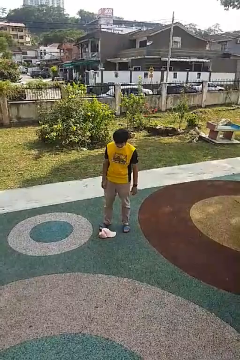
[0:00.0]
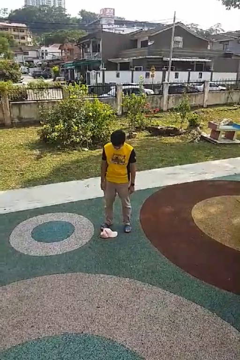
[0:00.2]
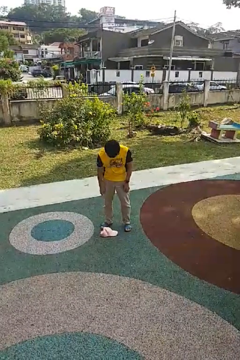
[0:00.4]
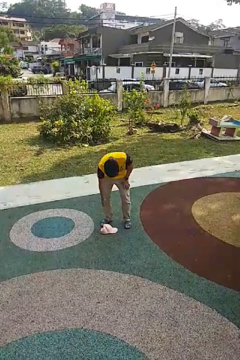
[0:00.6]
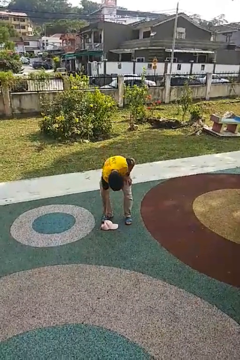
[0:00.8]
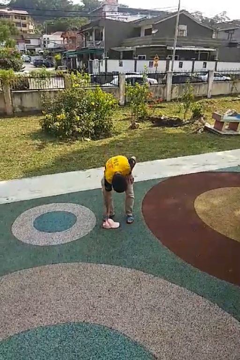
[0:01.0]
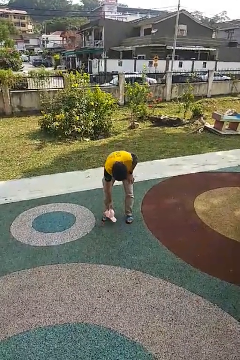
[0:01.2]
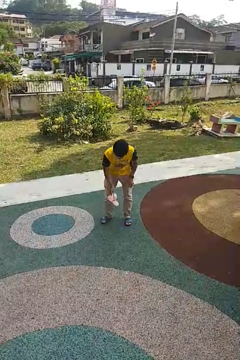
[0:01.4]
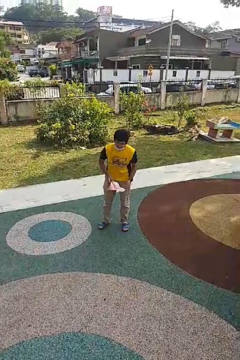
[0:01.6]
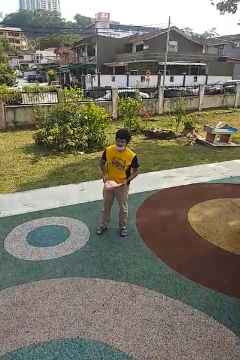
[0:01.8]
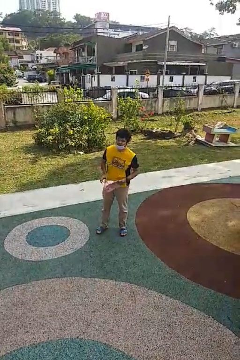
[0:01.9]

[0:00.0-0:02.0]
person picks up object from floor

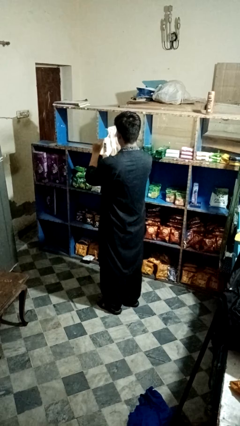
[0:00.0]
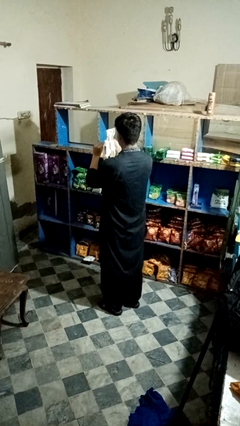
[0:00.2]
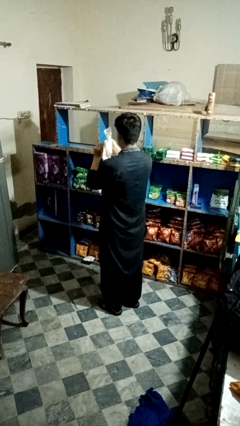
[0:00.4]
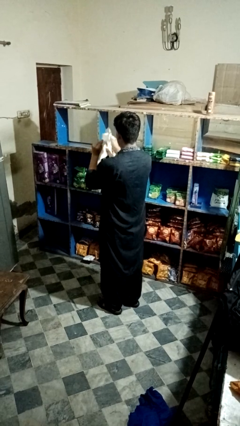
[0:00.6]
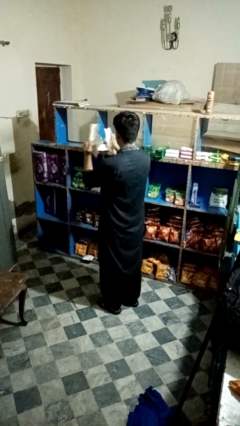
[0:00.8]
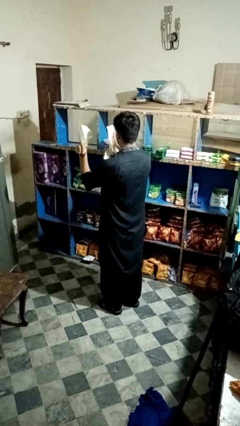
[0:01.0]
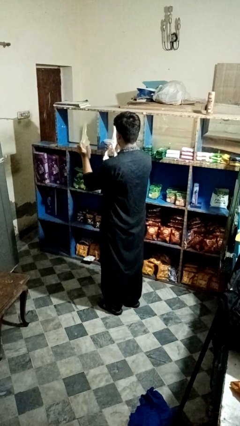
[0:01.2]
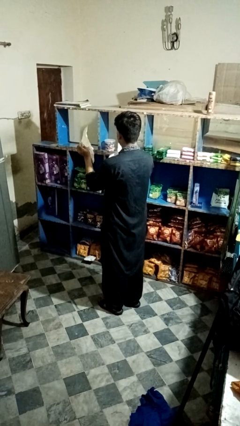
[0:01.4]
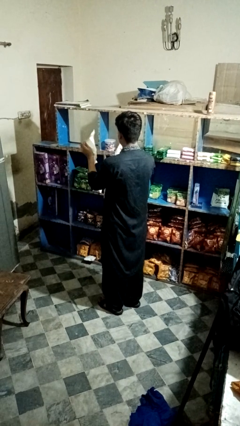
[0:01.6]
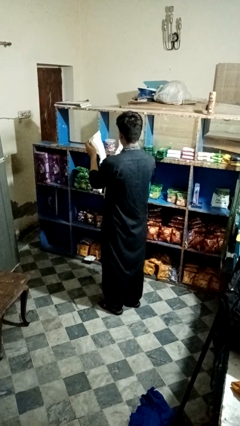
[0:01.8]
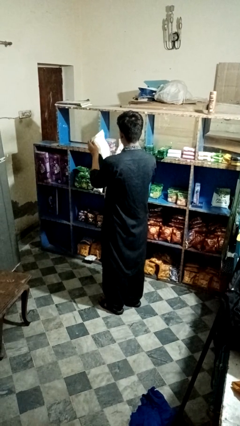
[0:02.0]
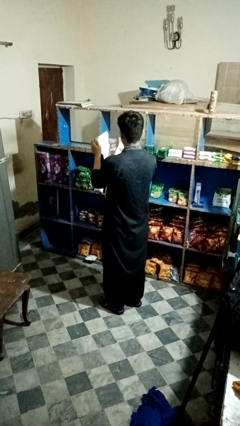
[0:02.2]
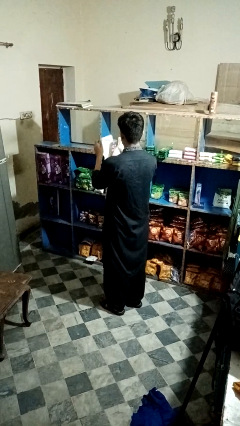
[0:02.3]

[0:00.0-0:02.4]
person tears paper

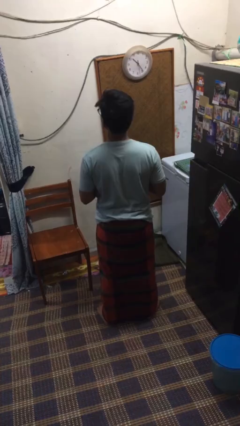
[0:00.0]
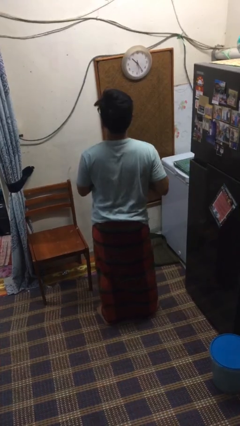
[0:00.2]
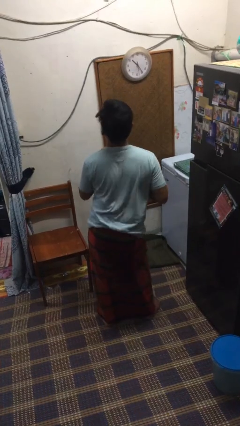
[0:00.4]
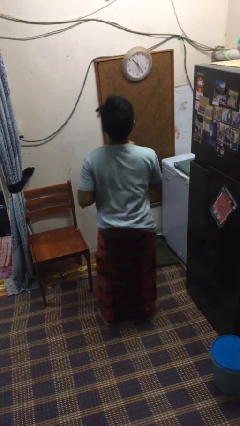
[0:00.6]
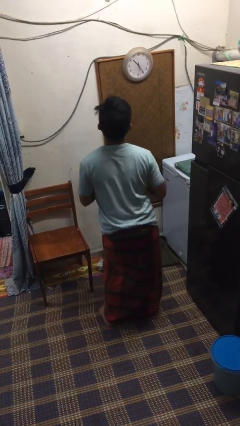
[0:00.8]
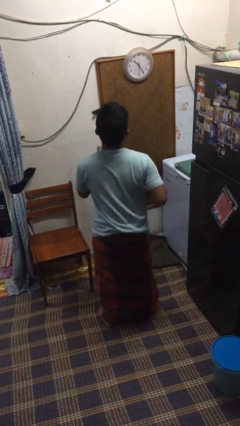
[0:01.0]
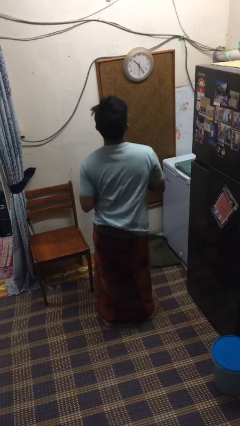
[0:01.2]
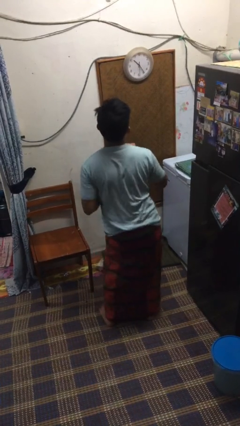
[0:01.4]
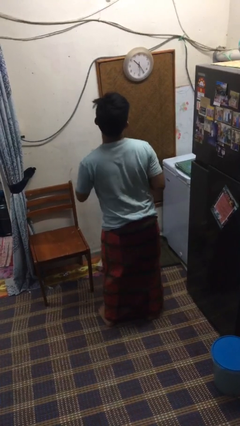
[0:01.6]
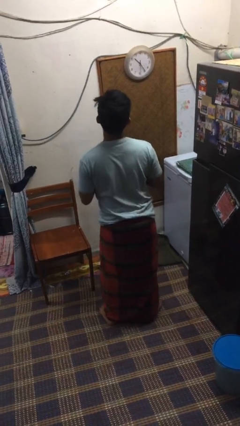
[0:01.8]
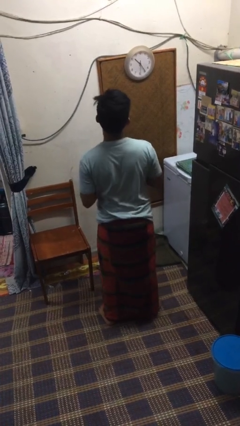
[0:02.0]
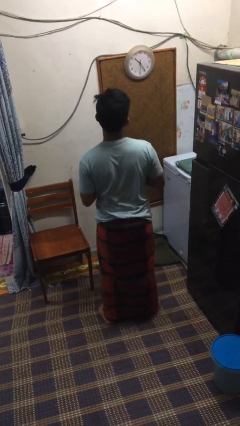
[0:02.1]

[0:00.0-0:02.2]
person wiggles hips

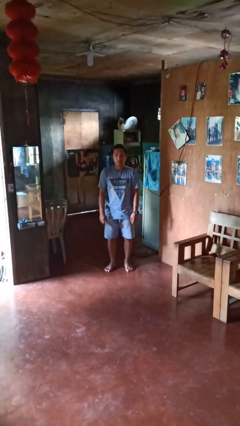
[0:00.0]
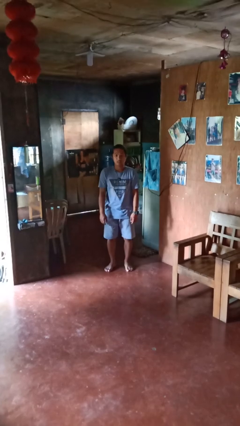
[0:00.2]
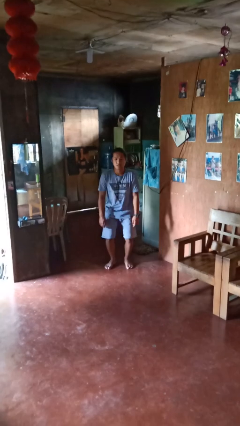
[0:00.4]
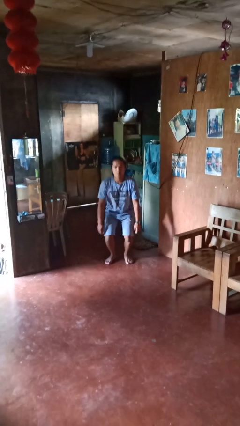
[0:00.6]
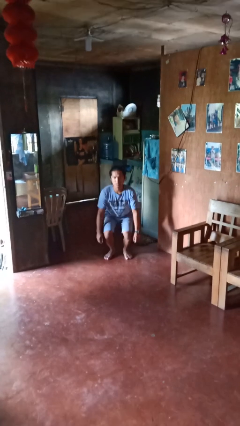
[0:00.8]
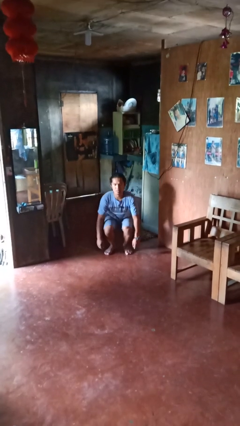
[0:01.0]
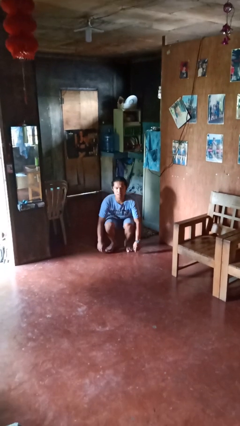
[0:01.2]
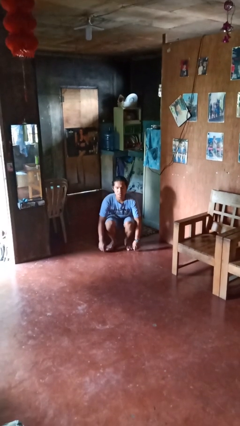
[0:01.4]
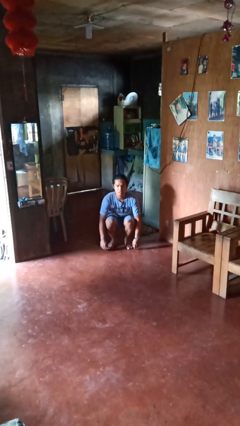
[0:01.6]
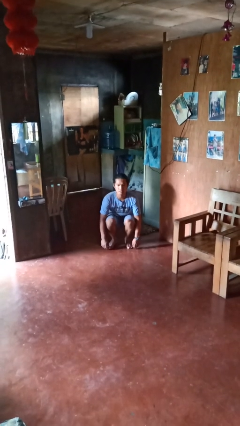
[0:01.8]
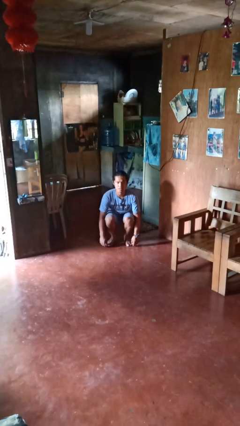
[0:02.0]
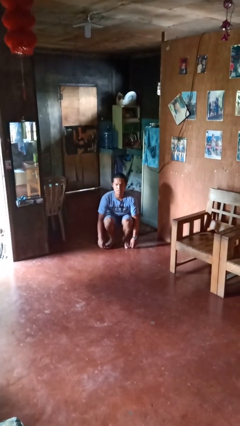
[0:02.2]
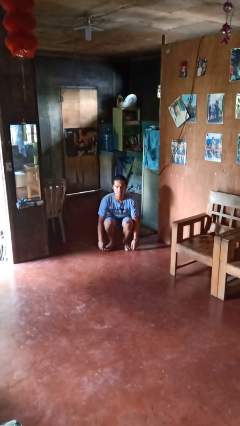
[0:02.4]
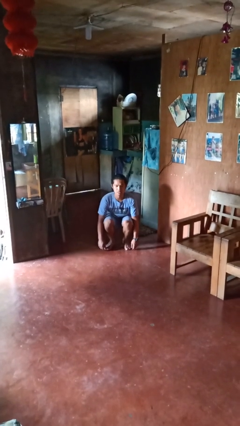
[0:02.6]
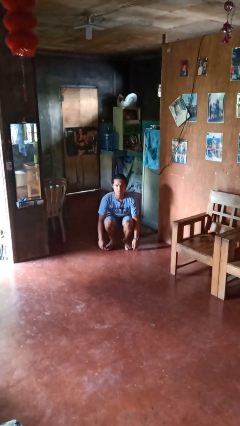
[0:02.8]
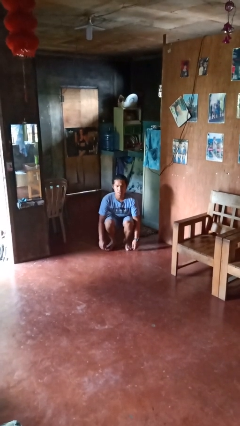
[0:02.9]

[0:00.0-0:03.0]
person squats

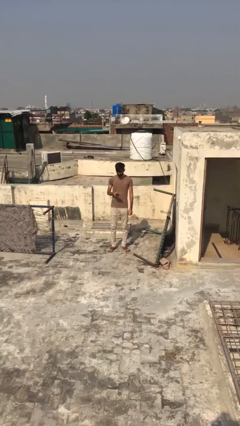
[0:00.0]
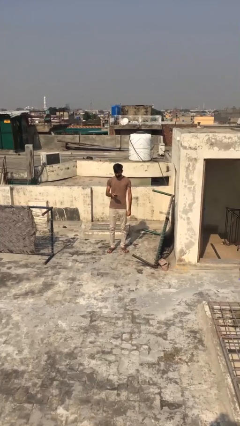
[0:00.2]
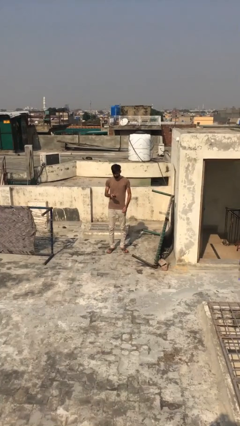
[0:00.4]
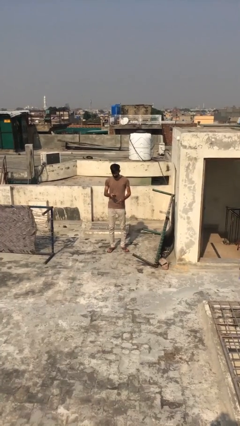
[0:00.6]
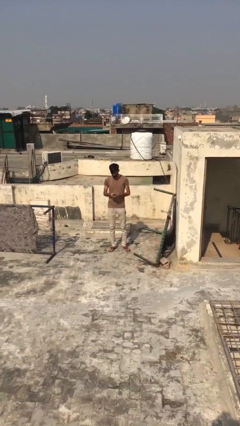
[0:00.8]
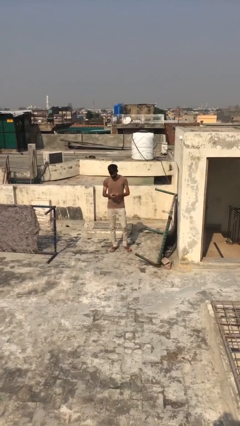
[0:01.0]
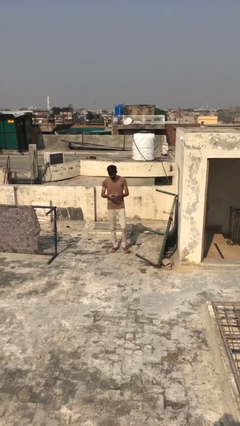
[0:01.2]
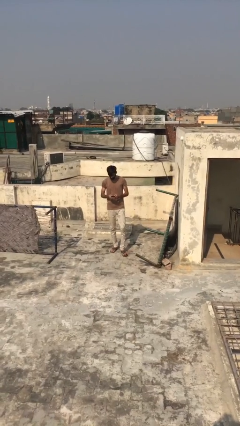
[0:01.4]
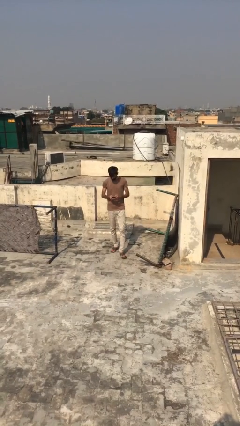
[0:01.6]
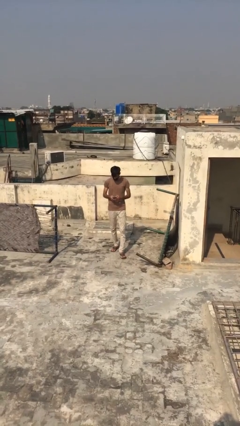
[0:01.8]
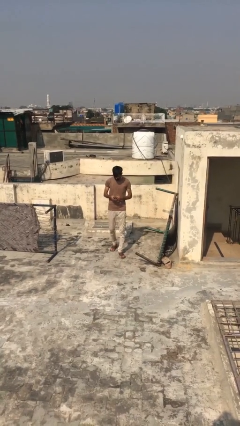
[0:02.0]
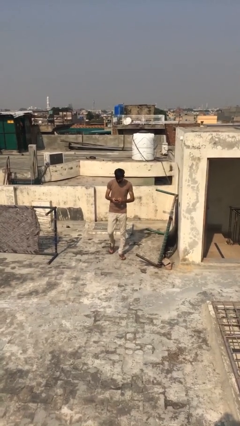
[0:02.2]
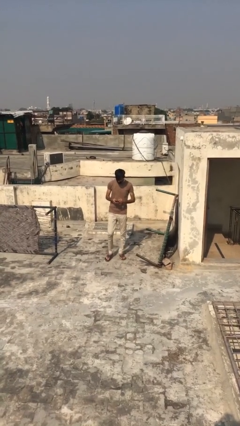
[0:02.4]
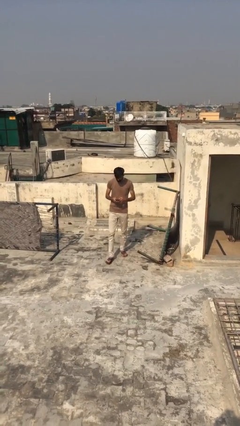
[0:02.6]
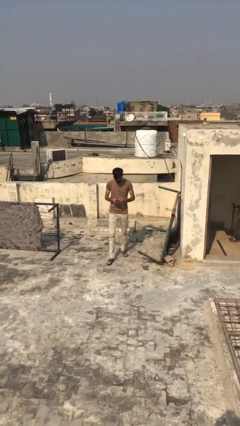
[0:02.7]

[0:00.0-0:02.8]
person texts on phone

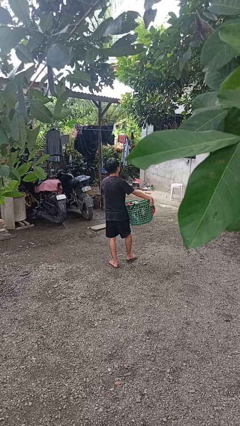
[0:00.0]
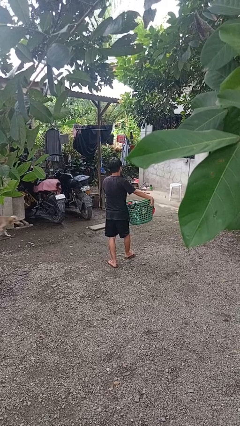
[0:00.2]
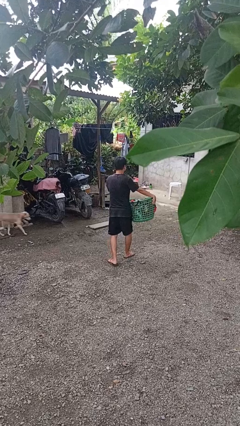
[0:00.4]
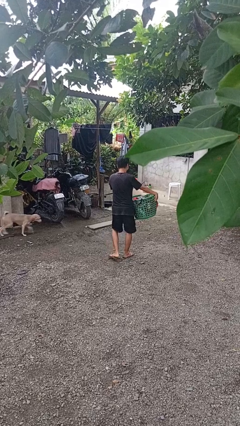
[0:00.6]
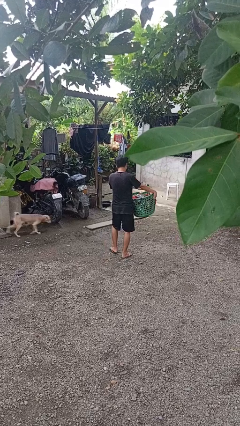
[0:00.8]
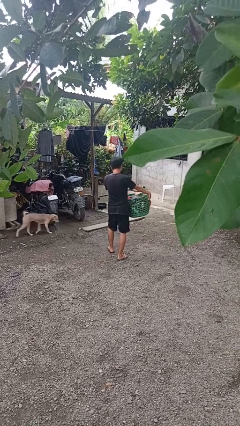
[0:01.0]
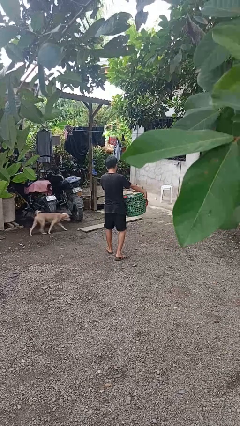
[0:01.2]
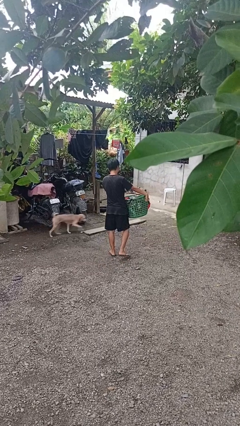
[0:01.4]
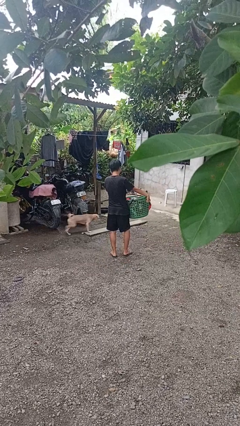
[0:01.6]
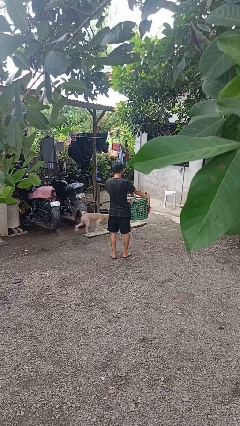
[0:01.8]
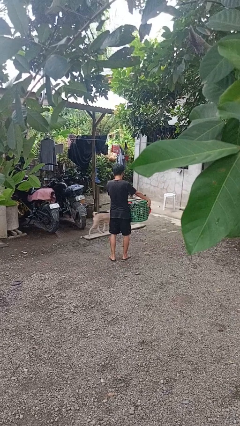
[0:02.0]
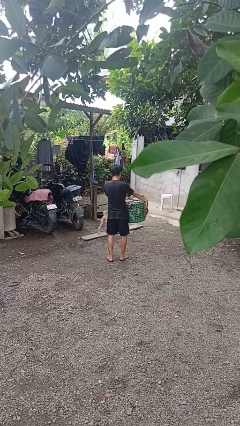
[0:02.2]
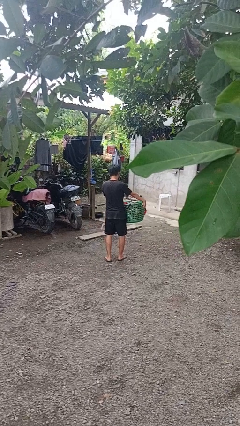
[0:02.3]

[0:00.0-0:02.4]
person carries laundry basket

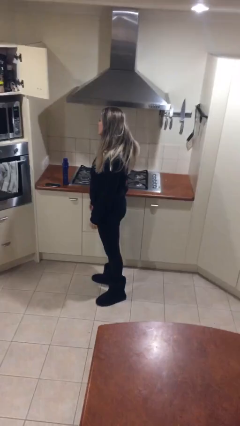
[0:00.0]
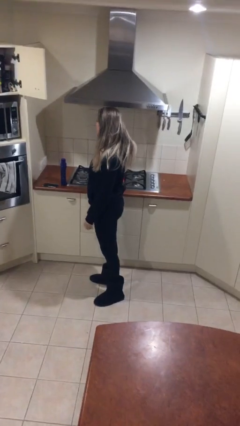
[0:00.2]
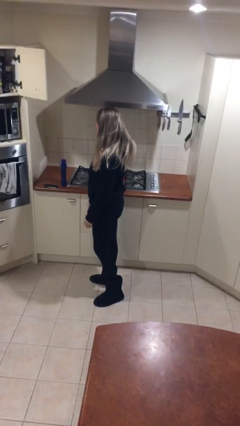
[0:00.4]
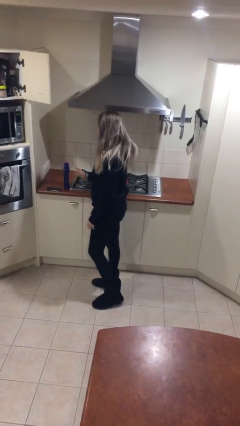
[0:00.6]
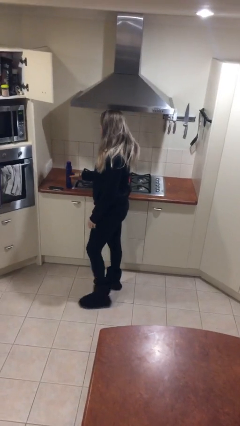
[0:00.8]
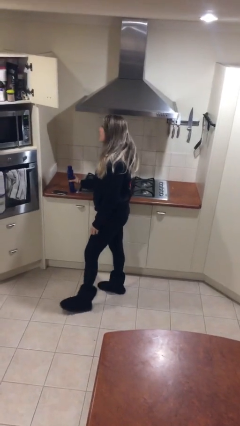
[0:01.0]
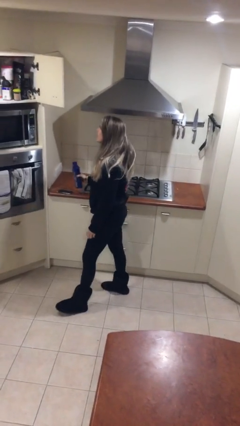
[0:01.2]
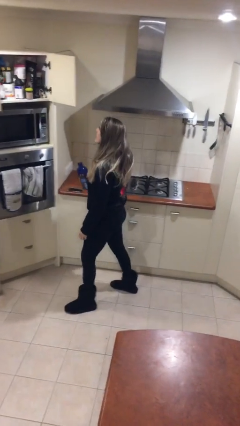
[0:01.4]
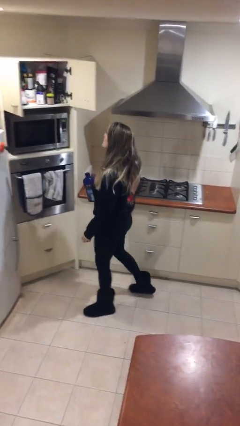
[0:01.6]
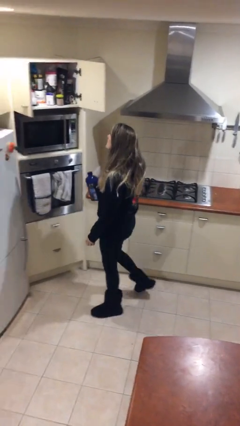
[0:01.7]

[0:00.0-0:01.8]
person picks up object from table

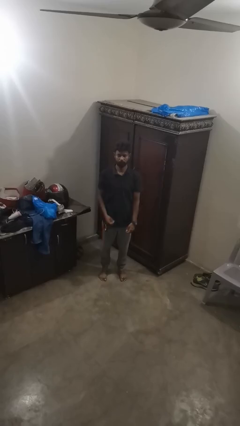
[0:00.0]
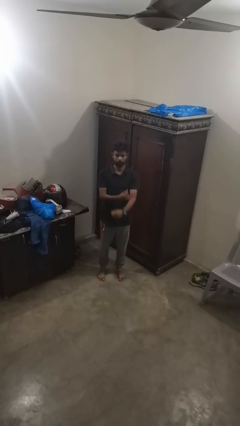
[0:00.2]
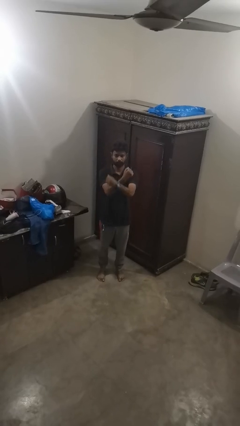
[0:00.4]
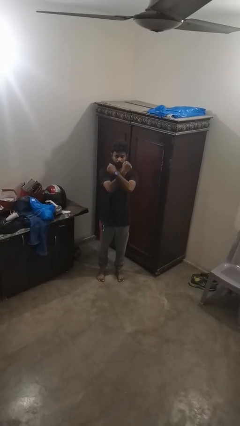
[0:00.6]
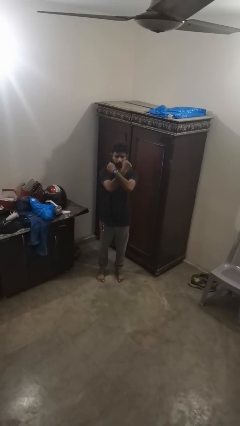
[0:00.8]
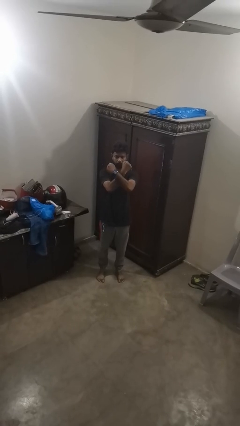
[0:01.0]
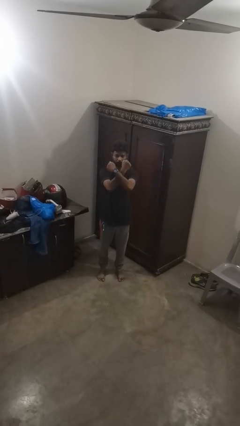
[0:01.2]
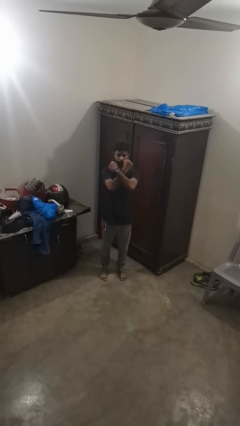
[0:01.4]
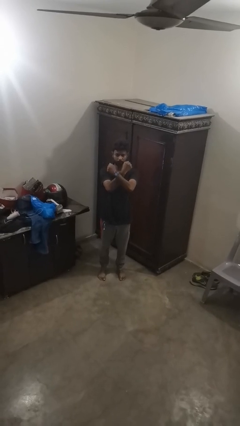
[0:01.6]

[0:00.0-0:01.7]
person gestures arms x
